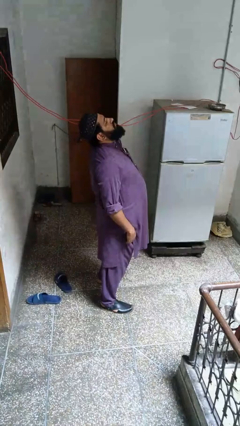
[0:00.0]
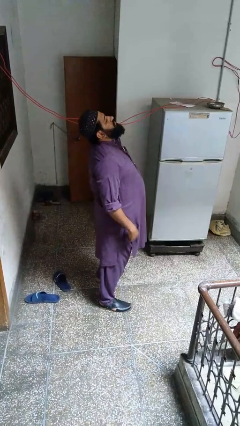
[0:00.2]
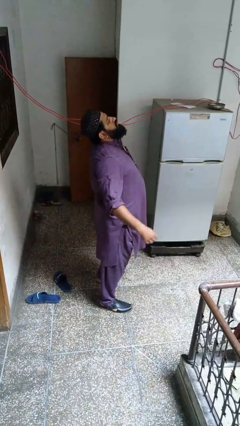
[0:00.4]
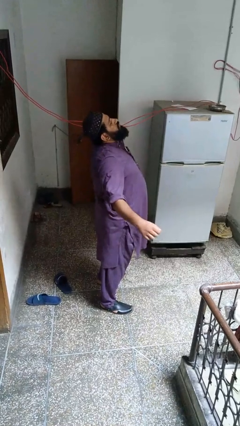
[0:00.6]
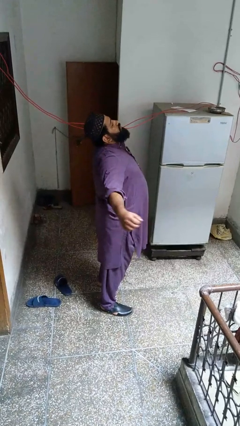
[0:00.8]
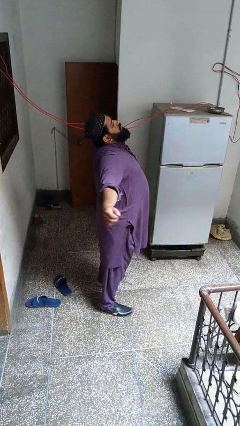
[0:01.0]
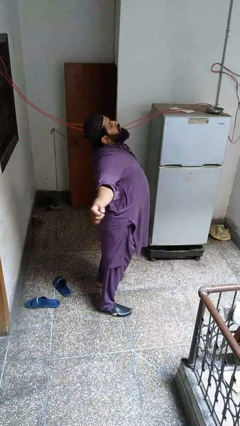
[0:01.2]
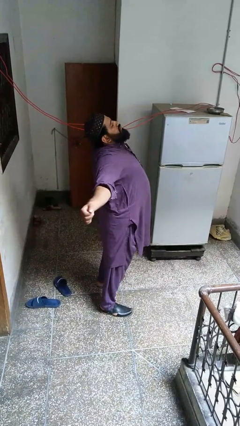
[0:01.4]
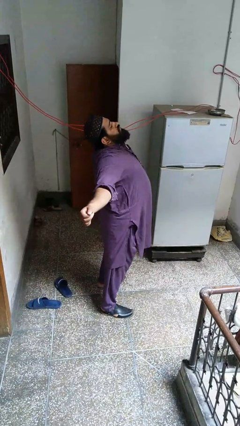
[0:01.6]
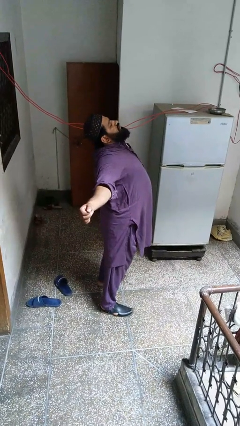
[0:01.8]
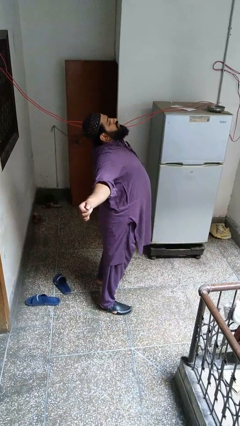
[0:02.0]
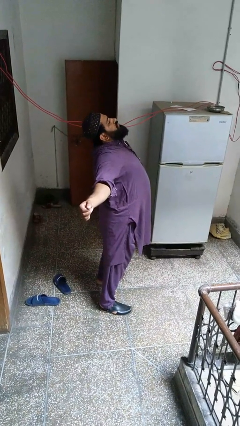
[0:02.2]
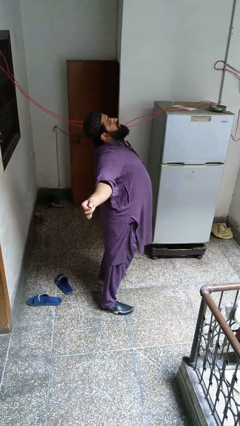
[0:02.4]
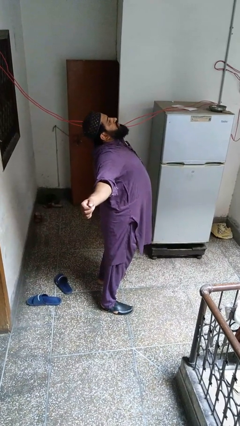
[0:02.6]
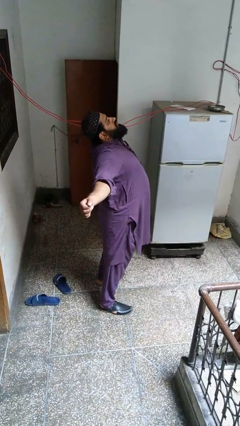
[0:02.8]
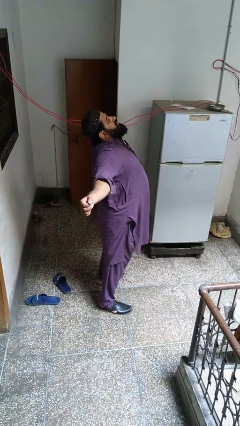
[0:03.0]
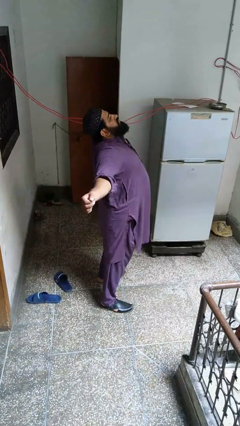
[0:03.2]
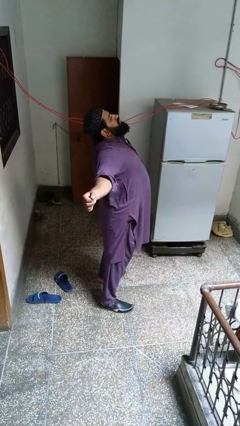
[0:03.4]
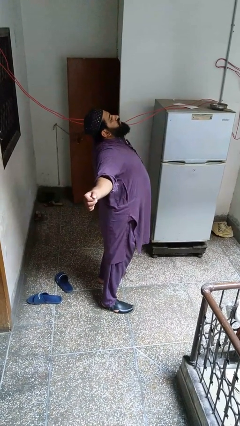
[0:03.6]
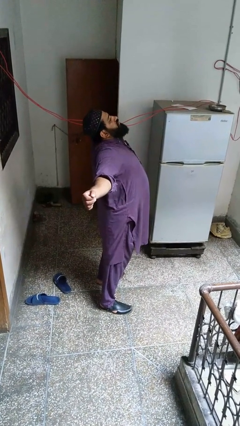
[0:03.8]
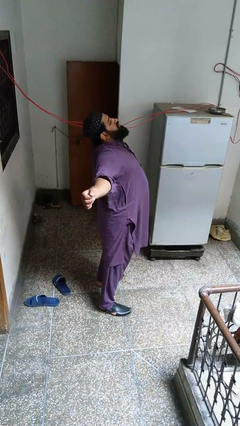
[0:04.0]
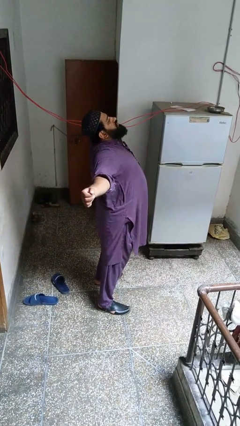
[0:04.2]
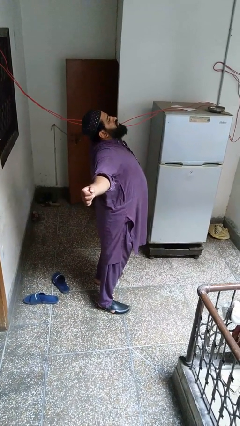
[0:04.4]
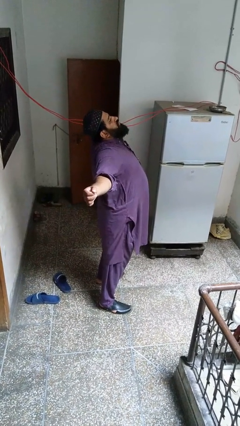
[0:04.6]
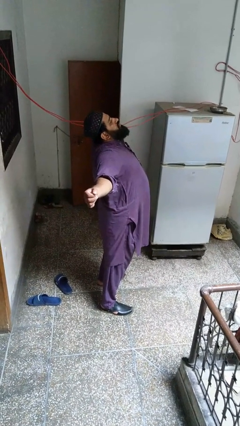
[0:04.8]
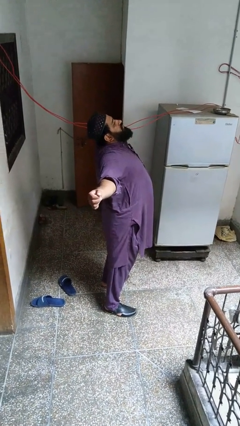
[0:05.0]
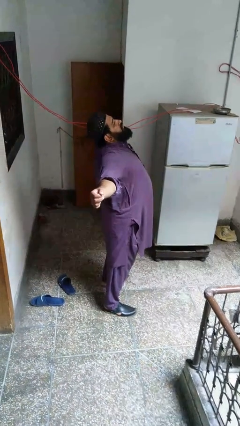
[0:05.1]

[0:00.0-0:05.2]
person stretches arms to side

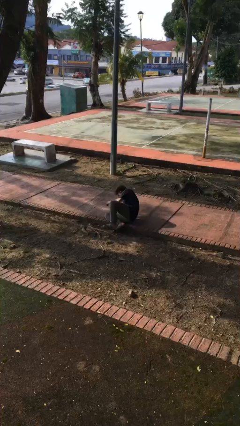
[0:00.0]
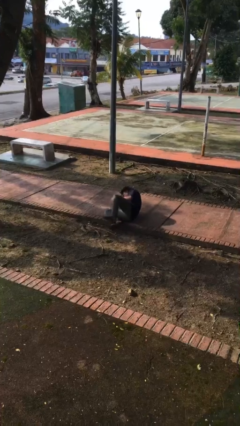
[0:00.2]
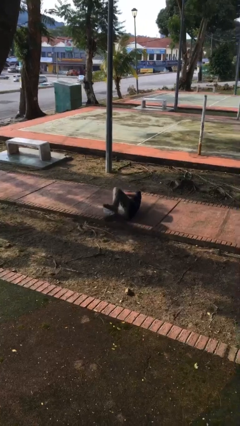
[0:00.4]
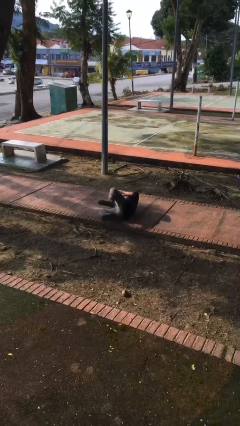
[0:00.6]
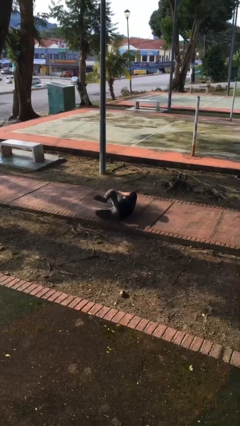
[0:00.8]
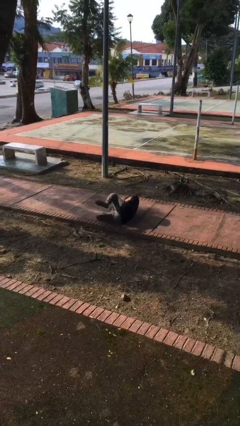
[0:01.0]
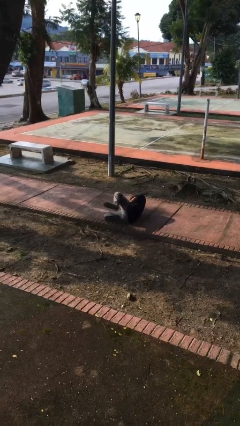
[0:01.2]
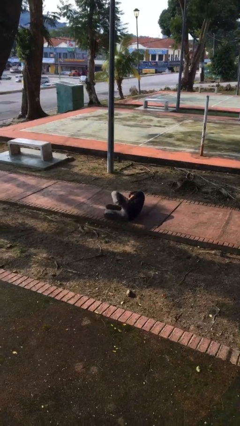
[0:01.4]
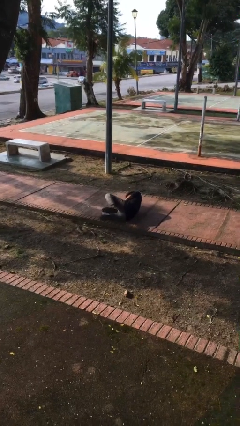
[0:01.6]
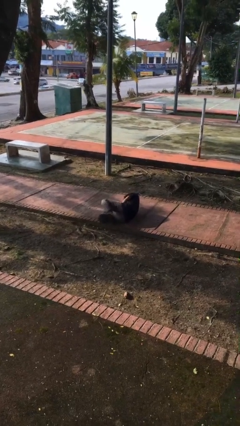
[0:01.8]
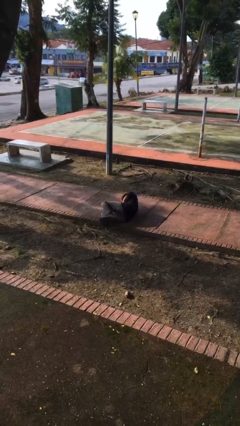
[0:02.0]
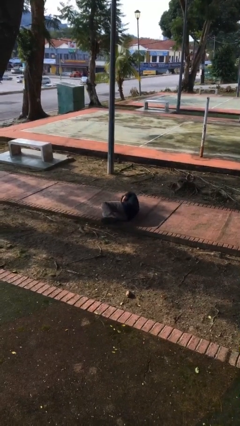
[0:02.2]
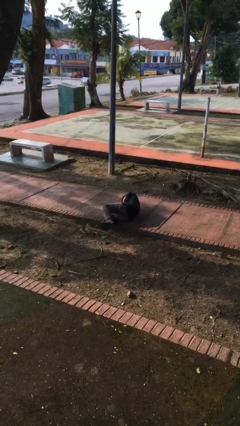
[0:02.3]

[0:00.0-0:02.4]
person lies down on floor

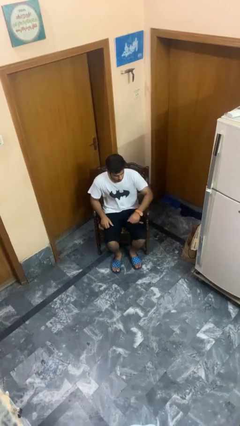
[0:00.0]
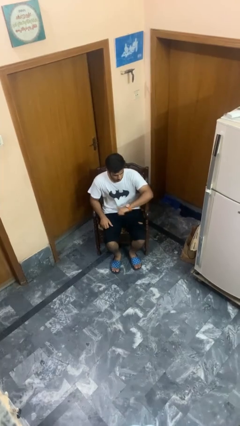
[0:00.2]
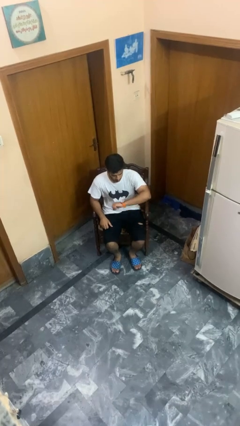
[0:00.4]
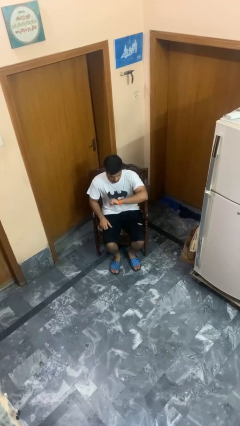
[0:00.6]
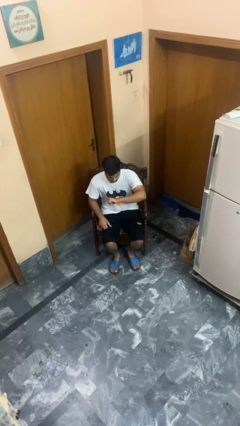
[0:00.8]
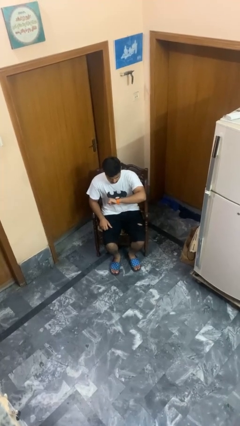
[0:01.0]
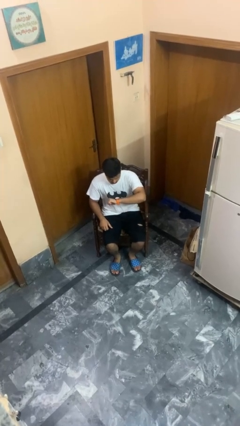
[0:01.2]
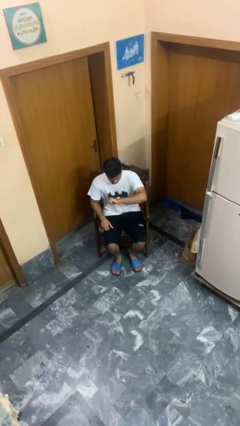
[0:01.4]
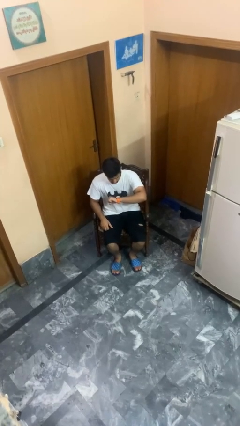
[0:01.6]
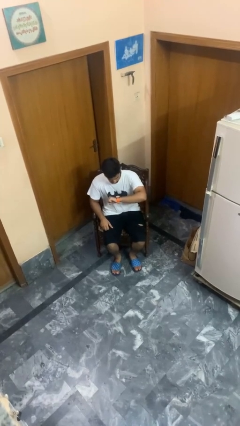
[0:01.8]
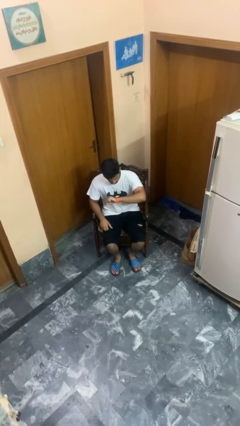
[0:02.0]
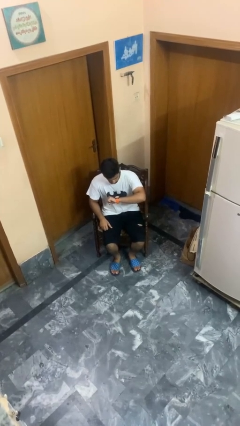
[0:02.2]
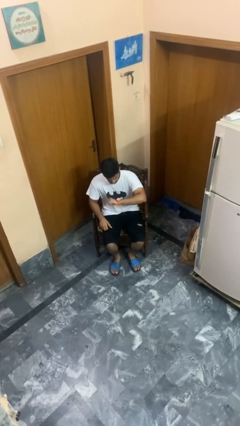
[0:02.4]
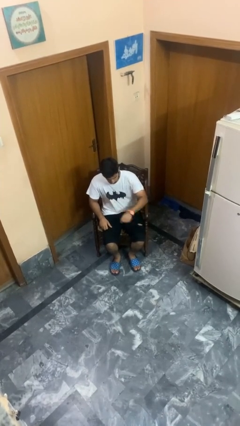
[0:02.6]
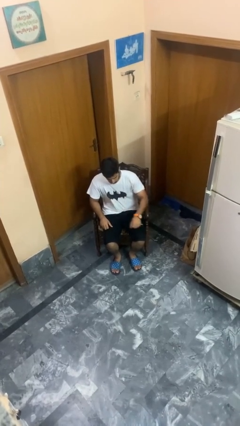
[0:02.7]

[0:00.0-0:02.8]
person looks at wristwatch

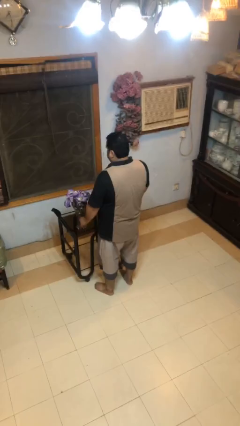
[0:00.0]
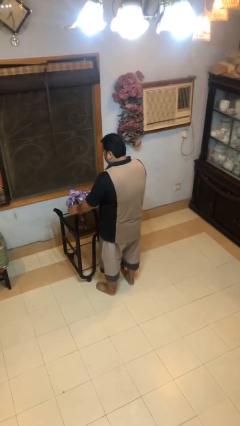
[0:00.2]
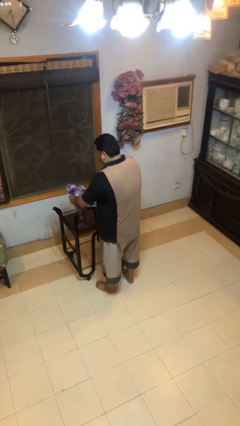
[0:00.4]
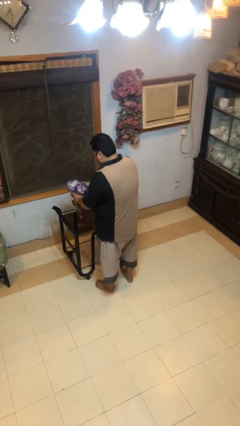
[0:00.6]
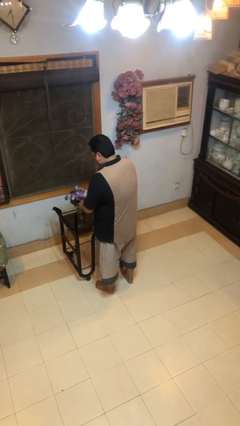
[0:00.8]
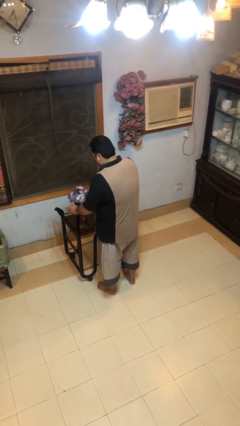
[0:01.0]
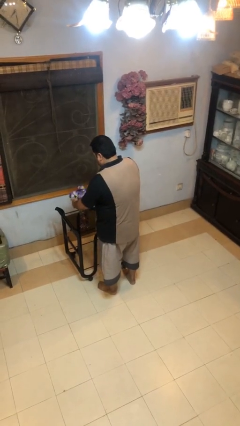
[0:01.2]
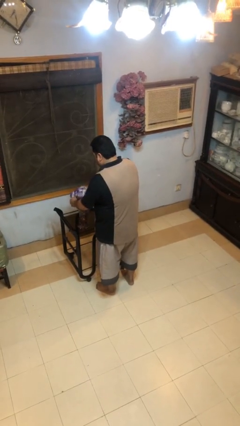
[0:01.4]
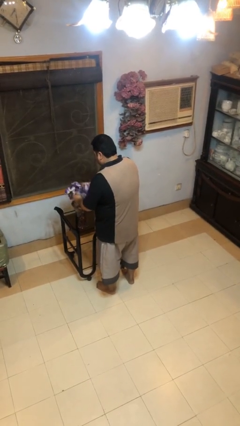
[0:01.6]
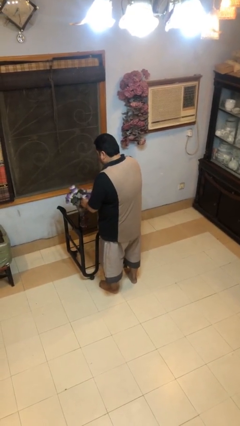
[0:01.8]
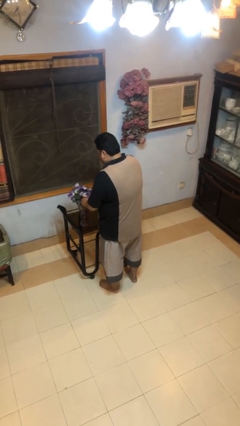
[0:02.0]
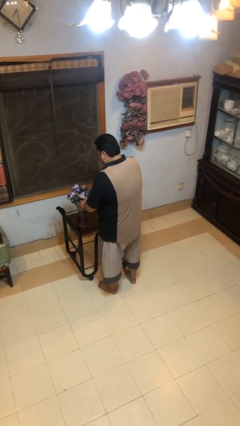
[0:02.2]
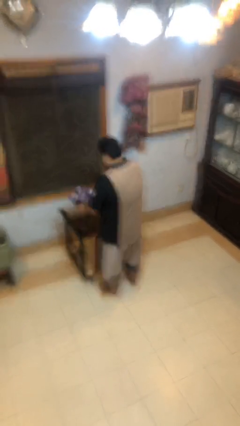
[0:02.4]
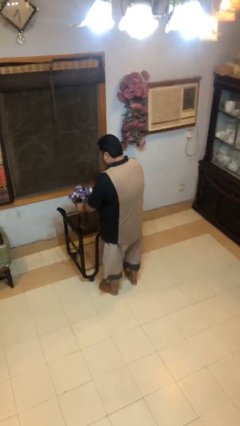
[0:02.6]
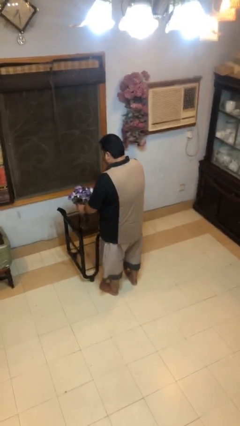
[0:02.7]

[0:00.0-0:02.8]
person arranges flowers in vase

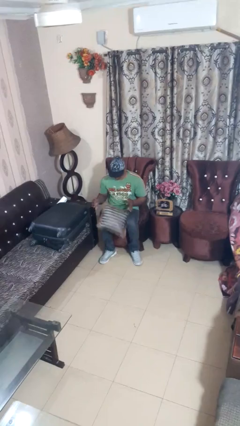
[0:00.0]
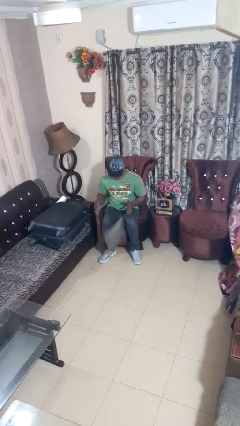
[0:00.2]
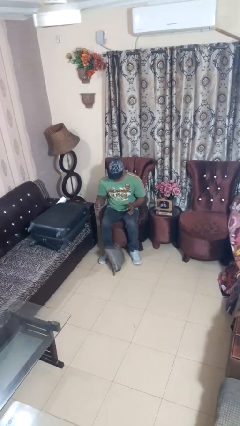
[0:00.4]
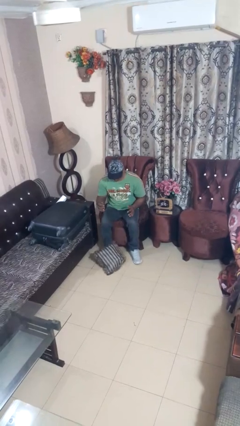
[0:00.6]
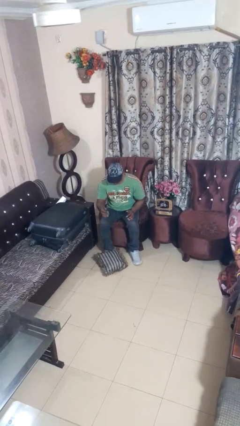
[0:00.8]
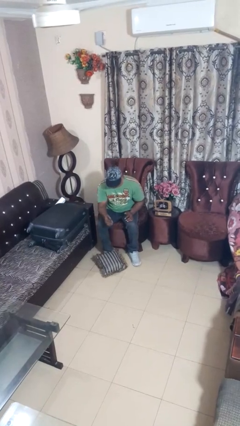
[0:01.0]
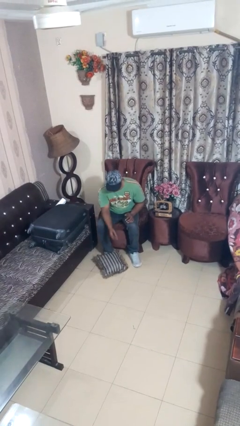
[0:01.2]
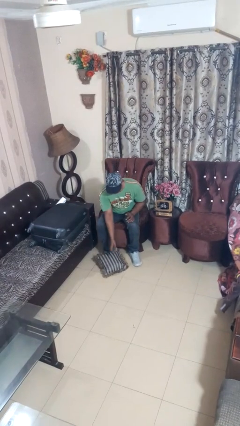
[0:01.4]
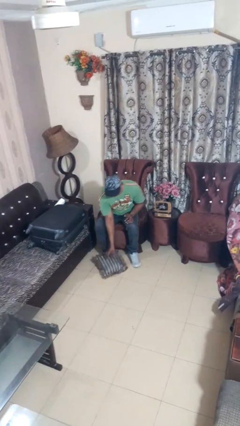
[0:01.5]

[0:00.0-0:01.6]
person drops object

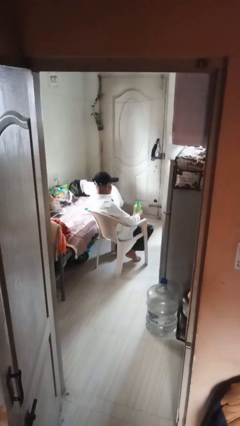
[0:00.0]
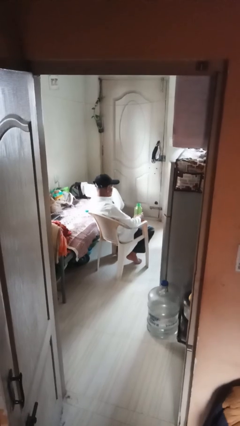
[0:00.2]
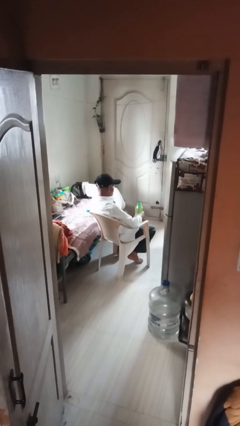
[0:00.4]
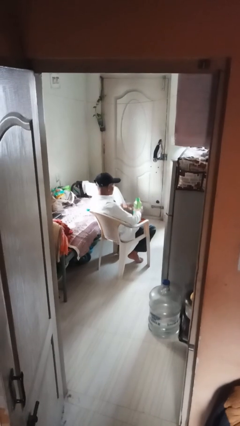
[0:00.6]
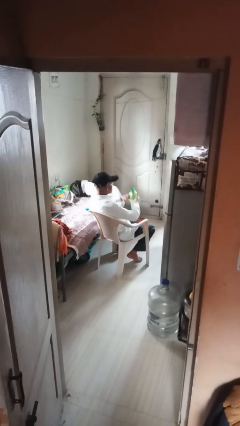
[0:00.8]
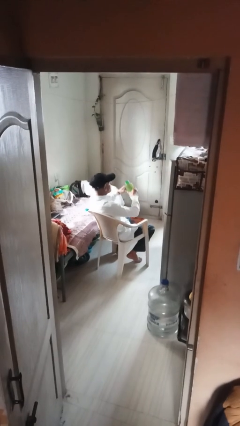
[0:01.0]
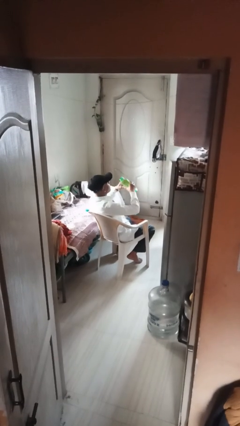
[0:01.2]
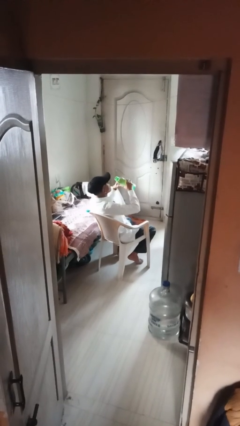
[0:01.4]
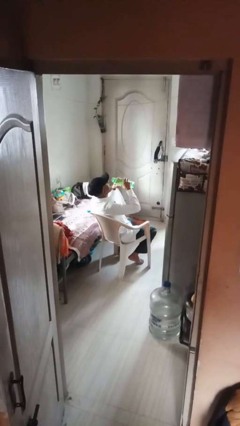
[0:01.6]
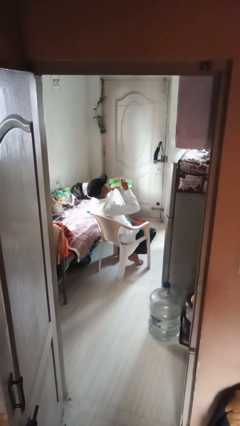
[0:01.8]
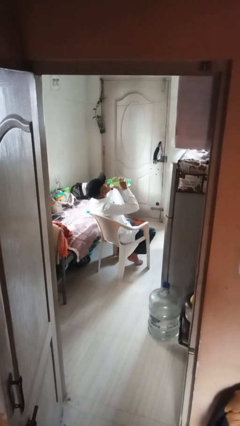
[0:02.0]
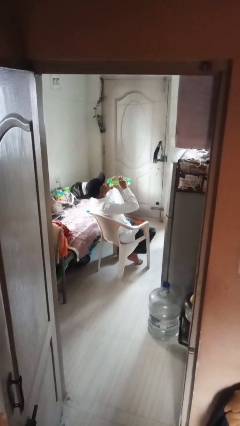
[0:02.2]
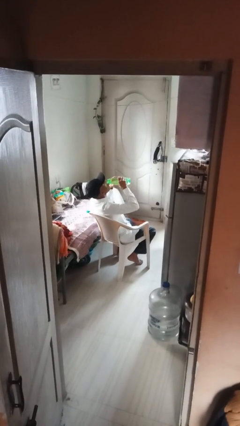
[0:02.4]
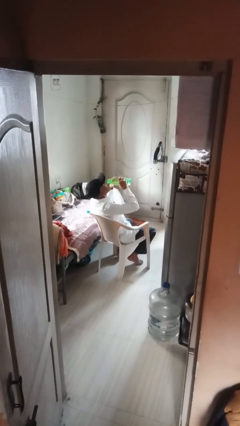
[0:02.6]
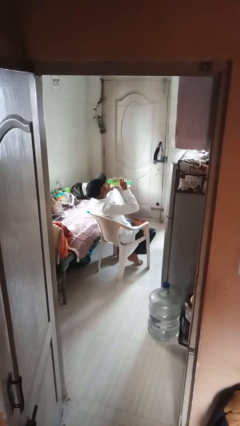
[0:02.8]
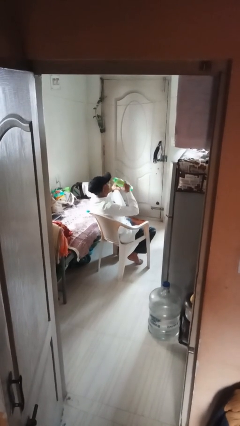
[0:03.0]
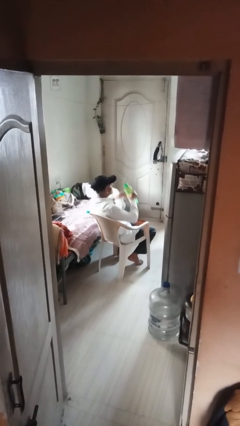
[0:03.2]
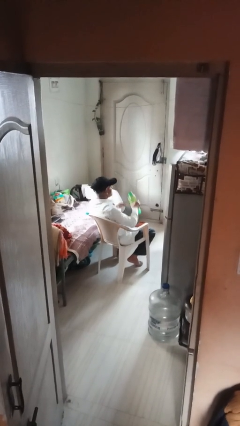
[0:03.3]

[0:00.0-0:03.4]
person drinks from bottle
